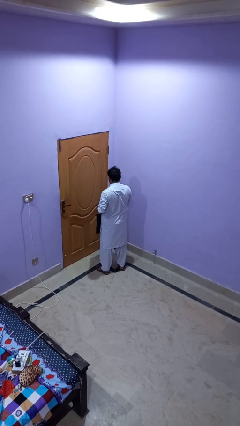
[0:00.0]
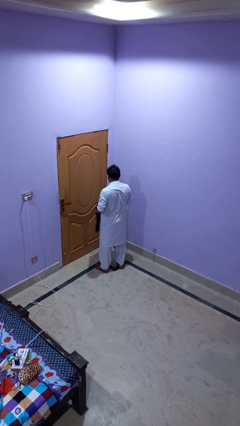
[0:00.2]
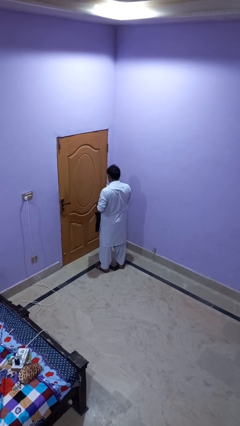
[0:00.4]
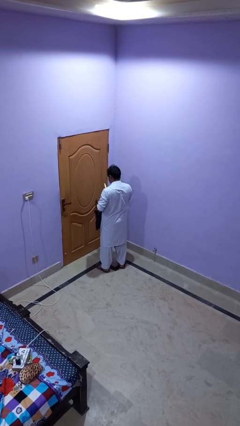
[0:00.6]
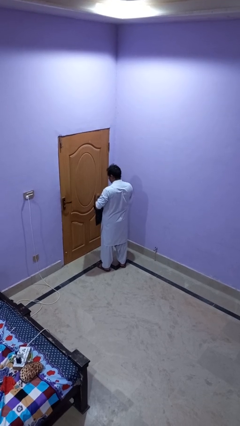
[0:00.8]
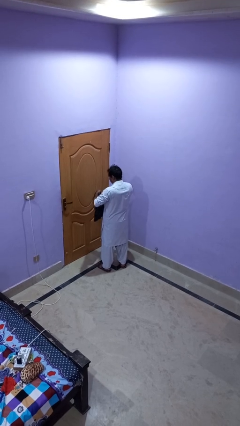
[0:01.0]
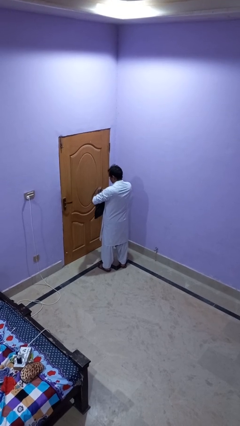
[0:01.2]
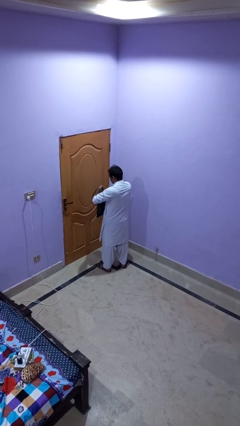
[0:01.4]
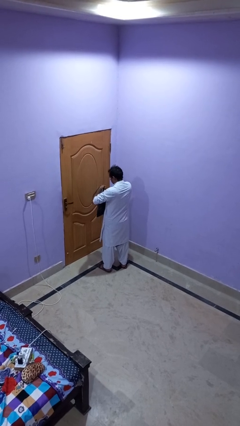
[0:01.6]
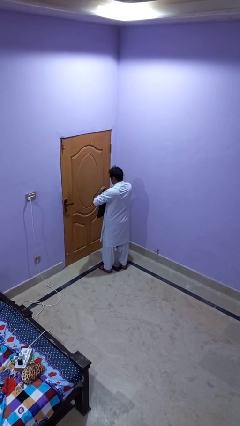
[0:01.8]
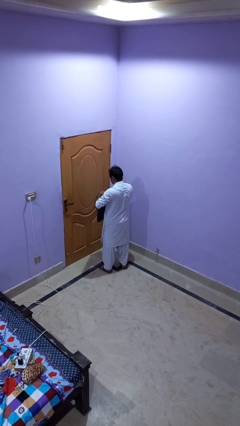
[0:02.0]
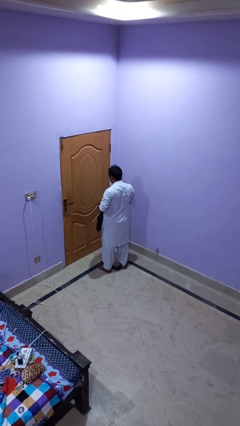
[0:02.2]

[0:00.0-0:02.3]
person puts object into purse

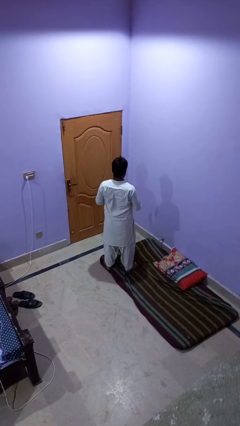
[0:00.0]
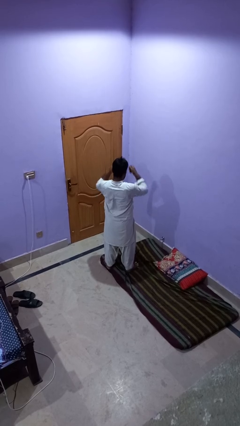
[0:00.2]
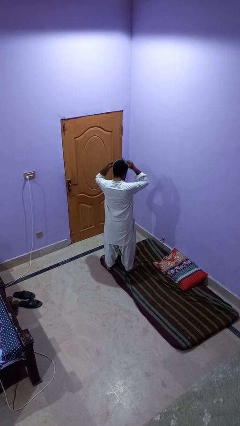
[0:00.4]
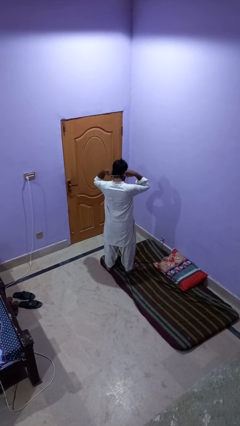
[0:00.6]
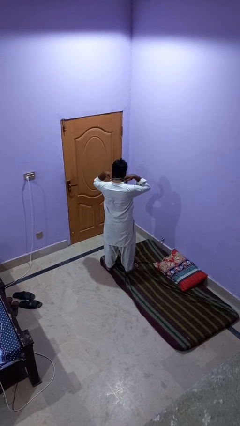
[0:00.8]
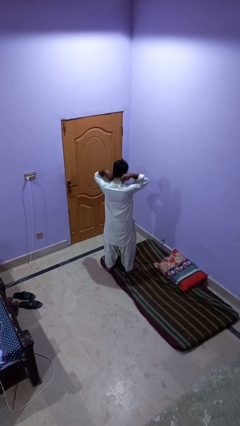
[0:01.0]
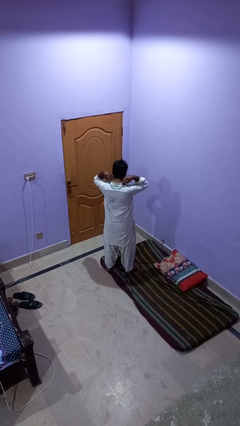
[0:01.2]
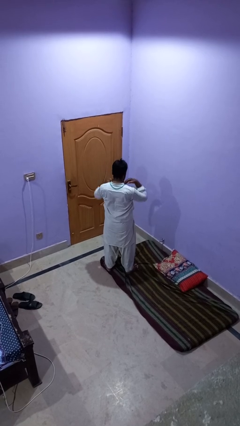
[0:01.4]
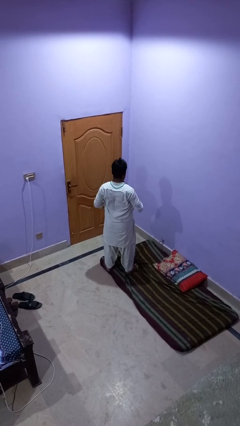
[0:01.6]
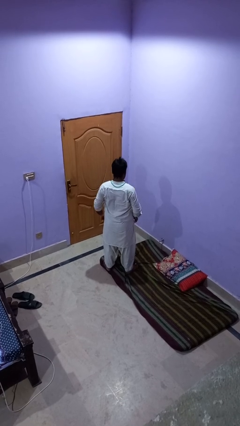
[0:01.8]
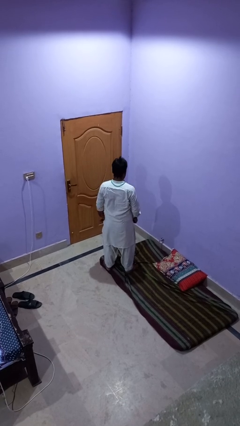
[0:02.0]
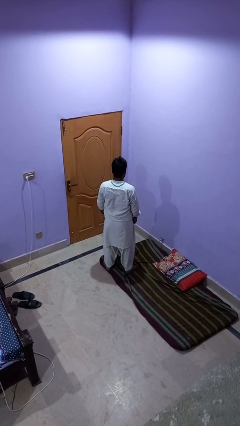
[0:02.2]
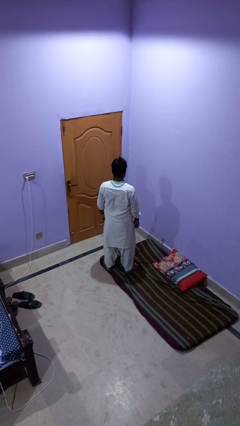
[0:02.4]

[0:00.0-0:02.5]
person puts on necklace

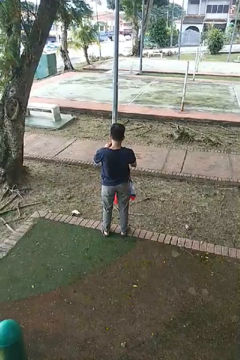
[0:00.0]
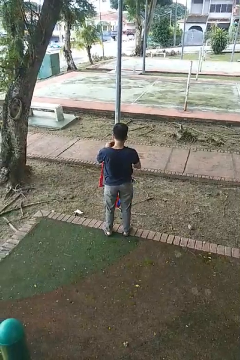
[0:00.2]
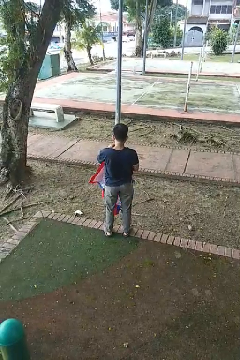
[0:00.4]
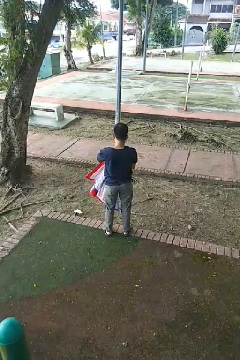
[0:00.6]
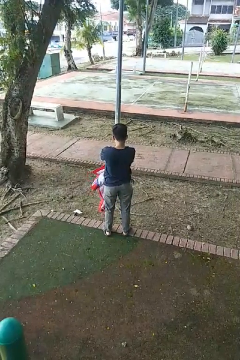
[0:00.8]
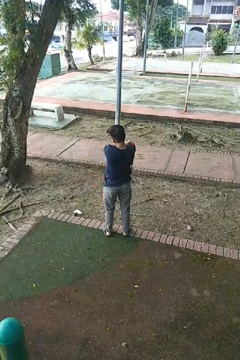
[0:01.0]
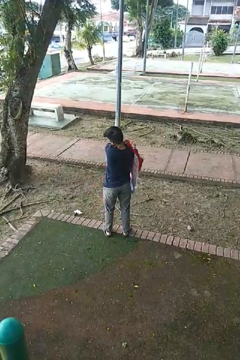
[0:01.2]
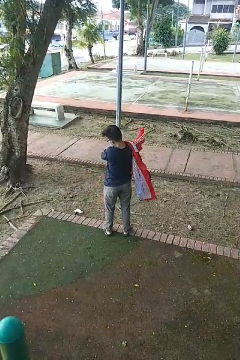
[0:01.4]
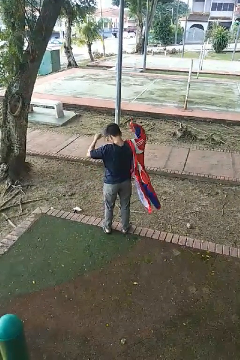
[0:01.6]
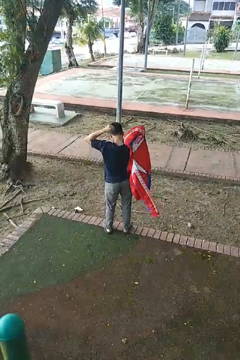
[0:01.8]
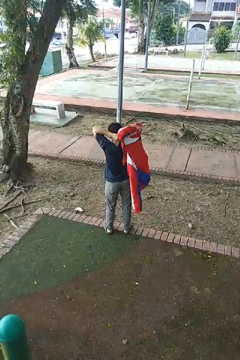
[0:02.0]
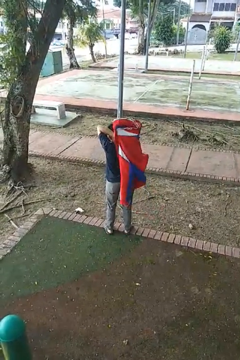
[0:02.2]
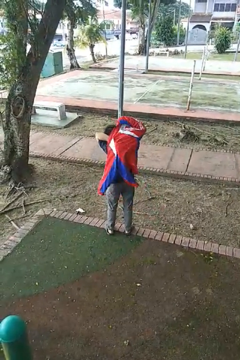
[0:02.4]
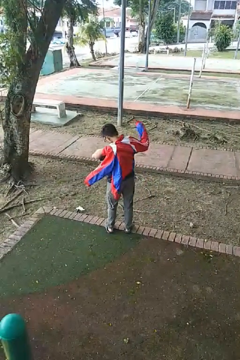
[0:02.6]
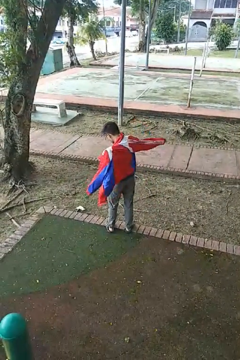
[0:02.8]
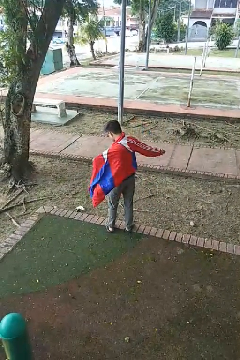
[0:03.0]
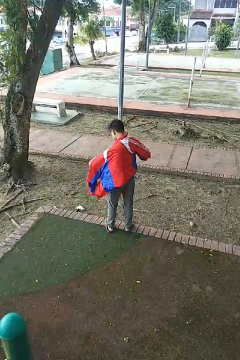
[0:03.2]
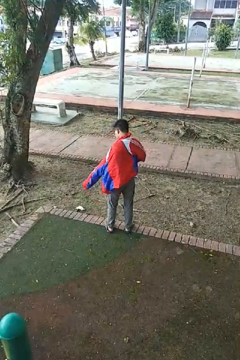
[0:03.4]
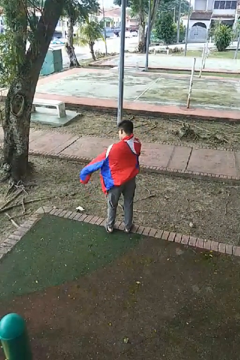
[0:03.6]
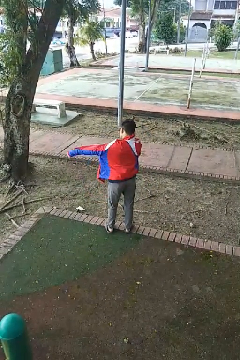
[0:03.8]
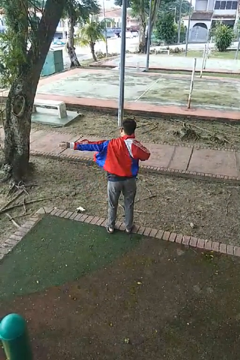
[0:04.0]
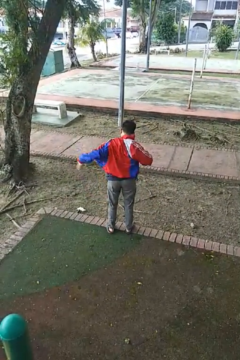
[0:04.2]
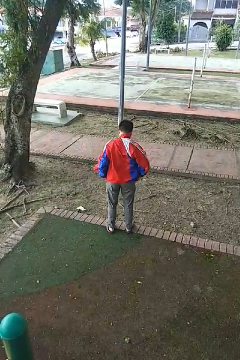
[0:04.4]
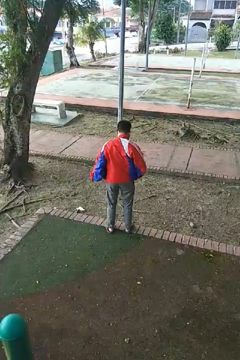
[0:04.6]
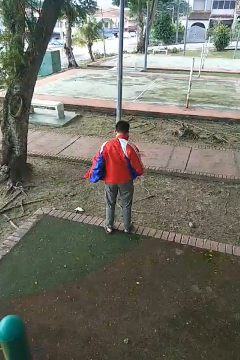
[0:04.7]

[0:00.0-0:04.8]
person puts on jacket

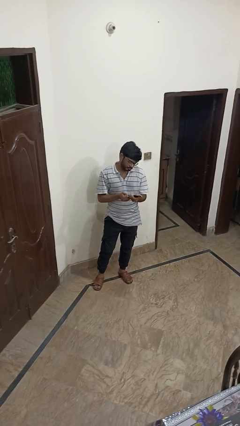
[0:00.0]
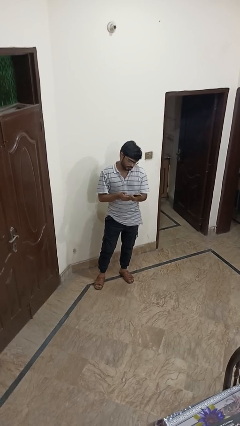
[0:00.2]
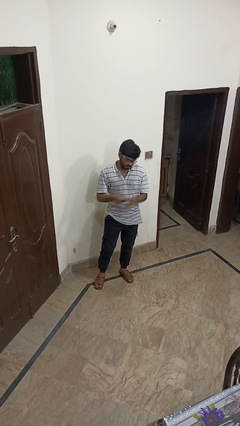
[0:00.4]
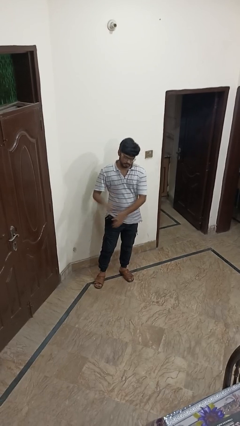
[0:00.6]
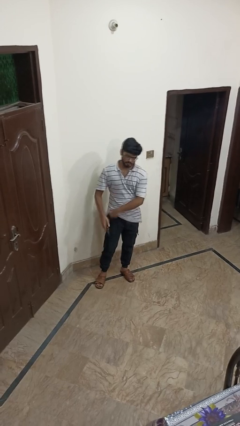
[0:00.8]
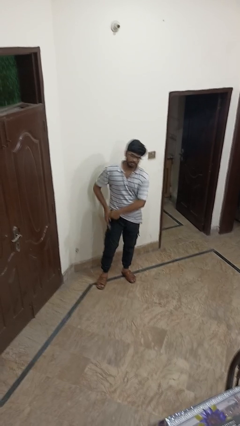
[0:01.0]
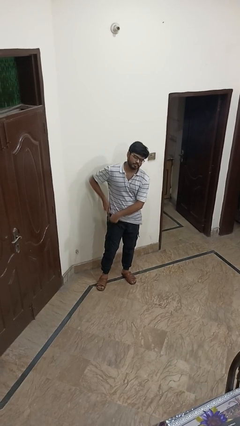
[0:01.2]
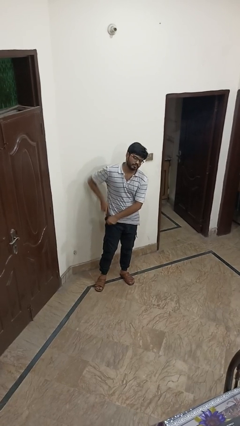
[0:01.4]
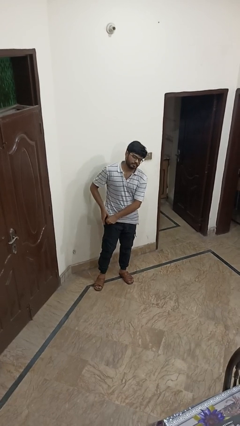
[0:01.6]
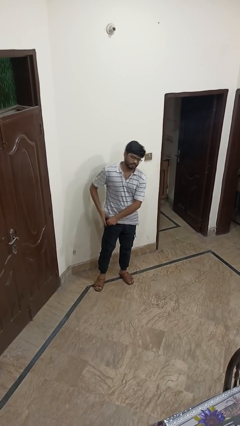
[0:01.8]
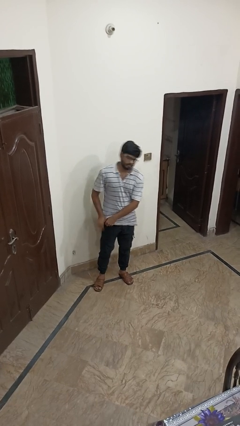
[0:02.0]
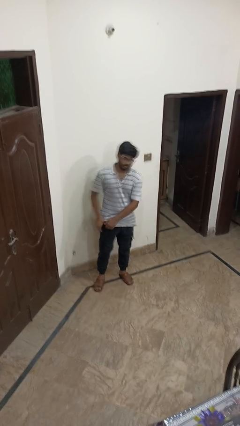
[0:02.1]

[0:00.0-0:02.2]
person puts phone into pocket

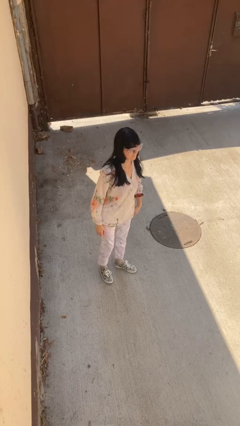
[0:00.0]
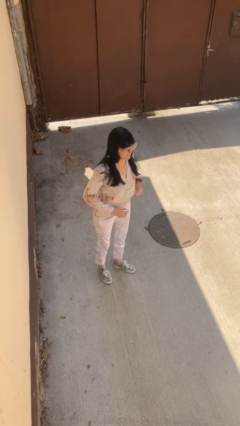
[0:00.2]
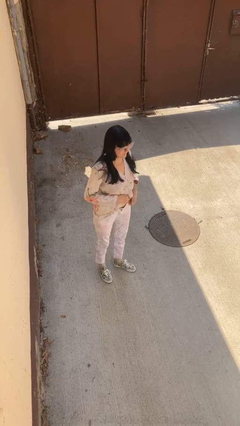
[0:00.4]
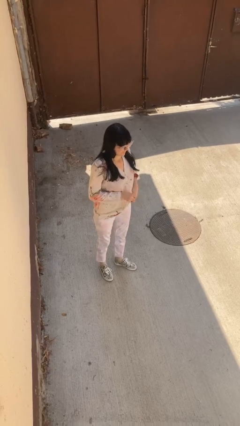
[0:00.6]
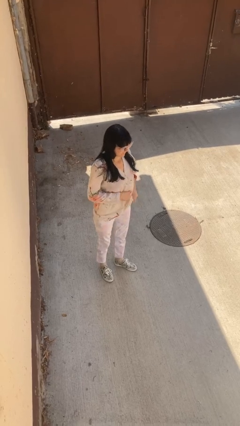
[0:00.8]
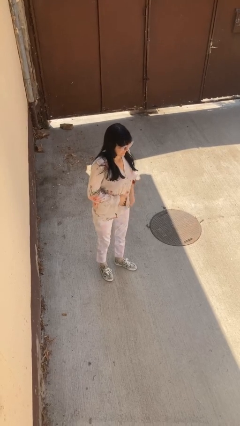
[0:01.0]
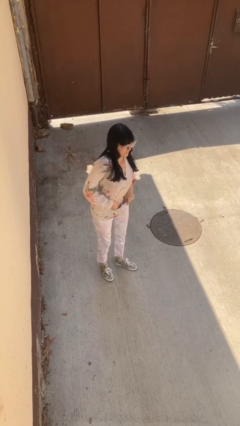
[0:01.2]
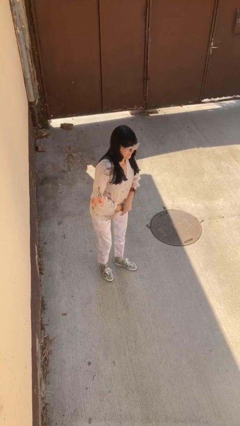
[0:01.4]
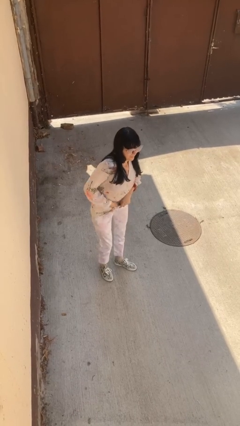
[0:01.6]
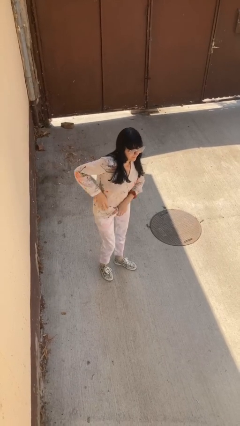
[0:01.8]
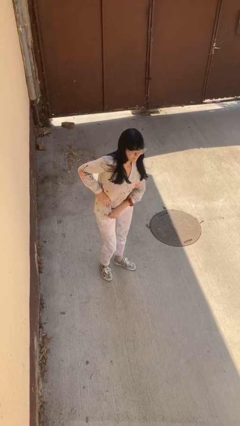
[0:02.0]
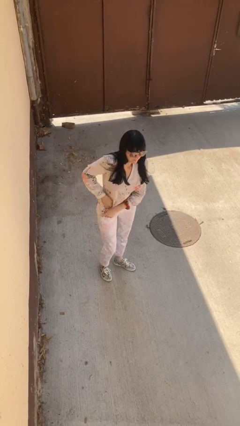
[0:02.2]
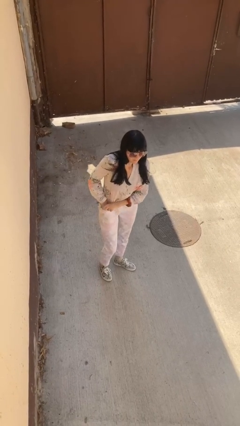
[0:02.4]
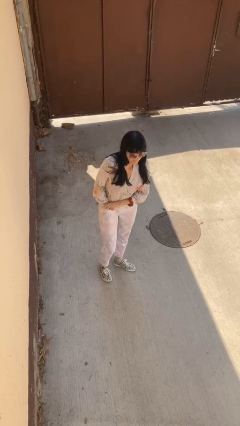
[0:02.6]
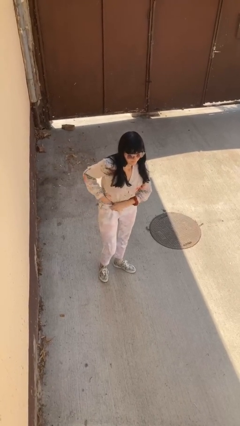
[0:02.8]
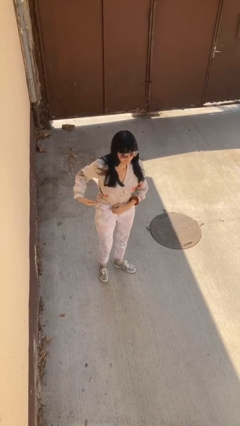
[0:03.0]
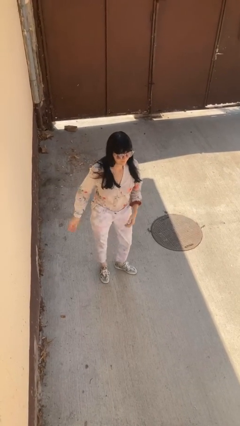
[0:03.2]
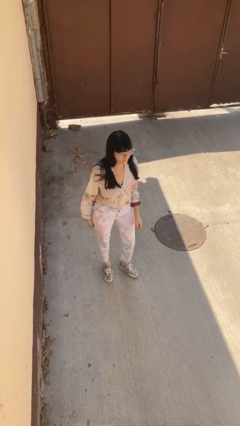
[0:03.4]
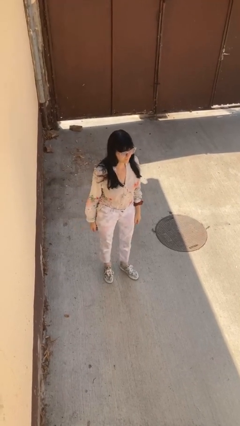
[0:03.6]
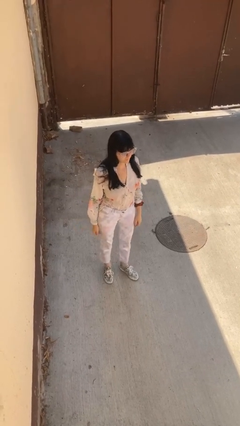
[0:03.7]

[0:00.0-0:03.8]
person tucks in shirt

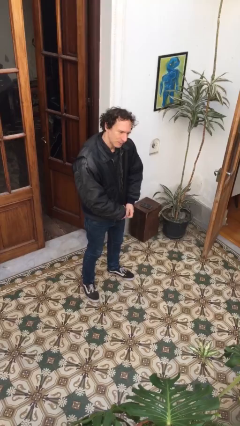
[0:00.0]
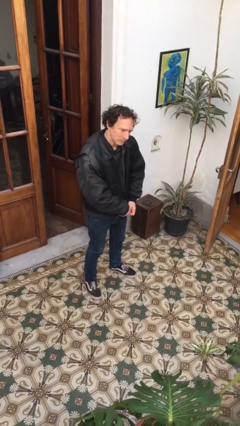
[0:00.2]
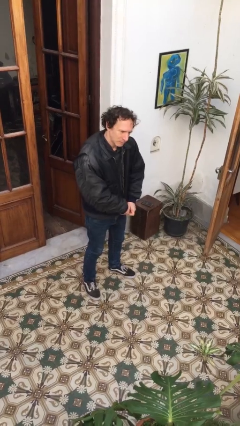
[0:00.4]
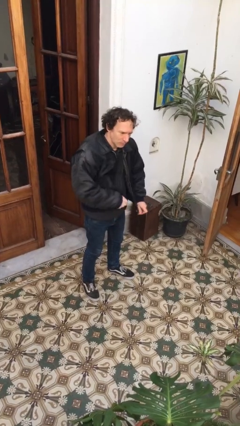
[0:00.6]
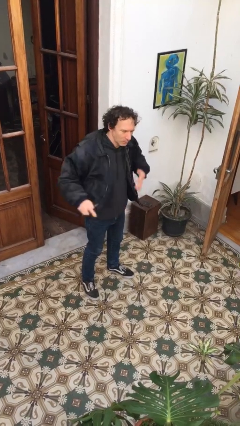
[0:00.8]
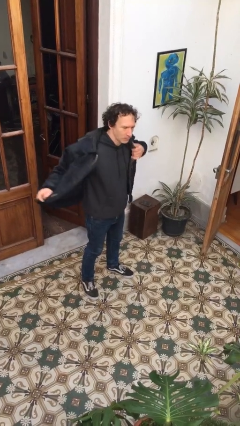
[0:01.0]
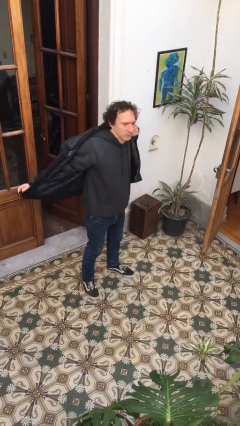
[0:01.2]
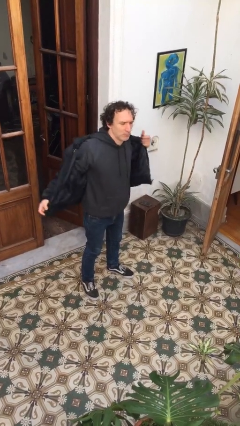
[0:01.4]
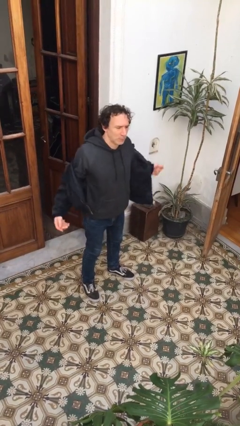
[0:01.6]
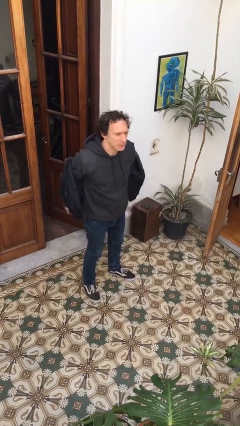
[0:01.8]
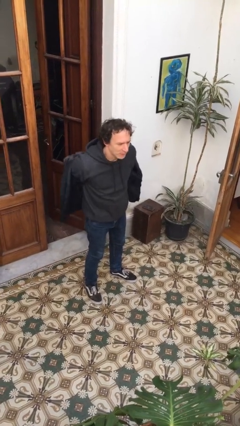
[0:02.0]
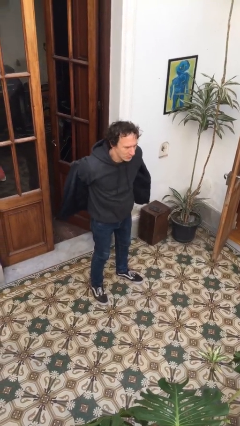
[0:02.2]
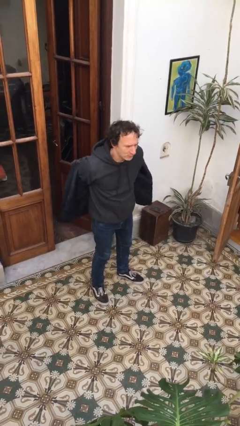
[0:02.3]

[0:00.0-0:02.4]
person takes off jacket

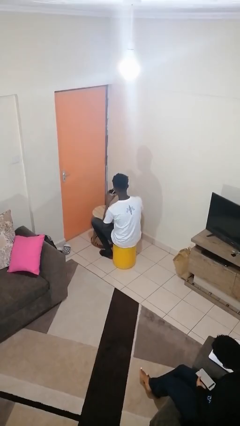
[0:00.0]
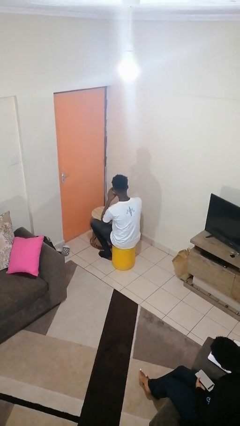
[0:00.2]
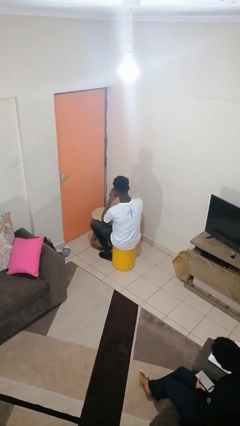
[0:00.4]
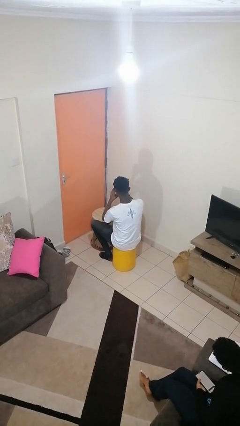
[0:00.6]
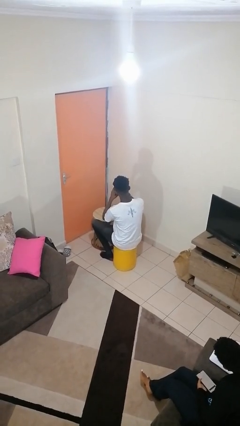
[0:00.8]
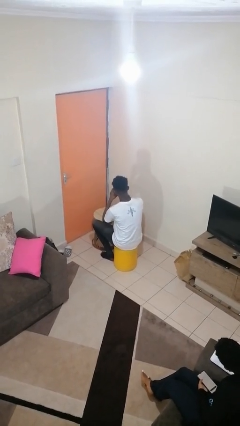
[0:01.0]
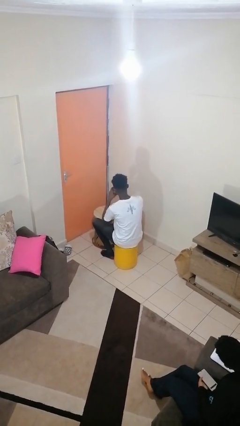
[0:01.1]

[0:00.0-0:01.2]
person drinks from mug
